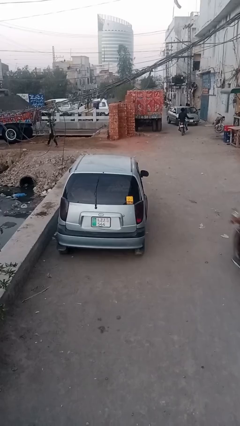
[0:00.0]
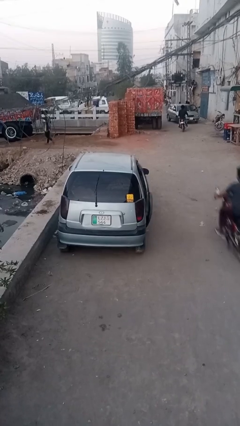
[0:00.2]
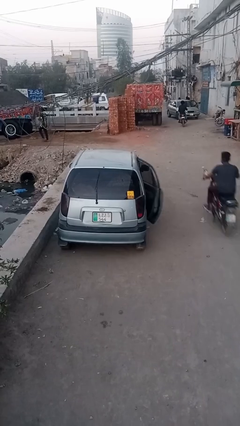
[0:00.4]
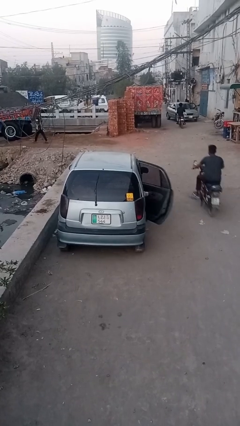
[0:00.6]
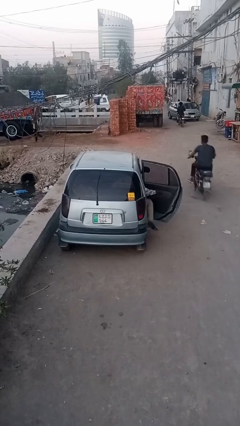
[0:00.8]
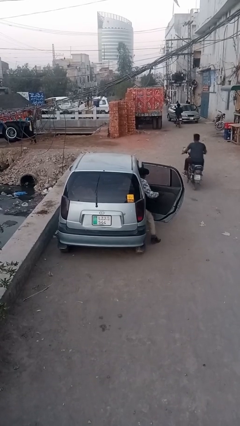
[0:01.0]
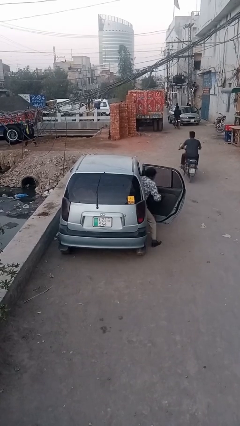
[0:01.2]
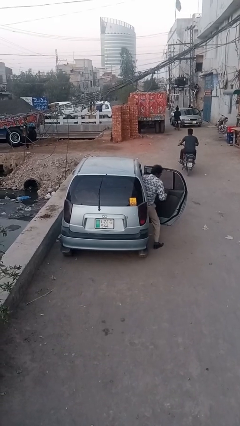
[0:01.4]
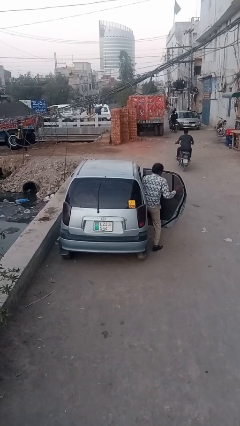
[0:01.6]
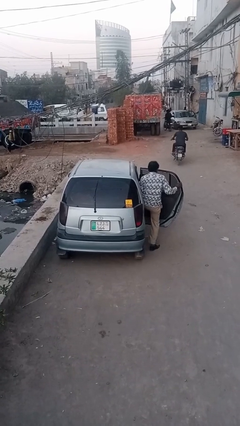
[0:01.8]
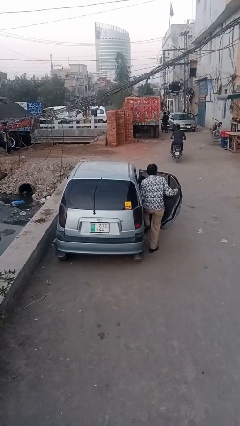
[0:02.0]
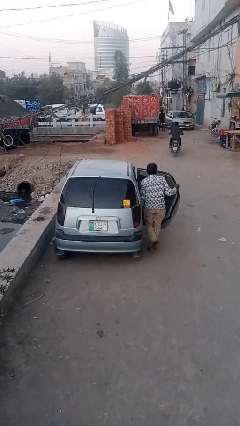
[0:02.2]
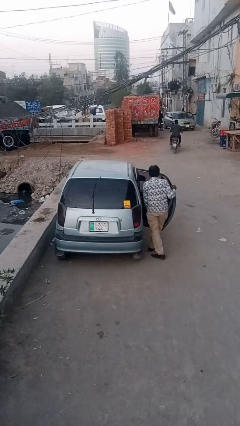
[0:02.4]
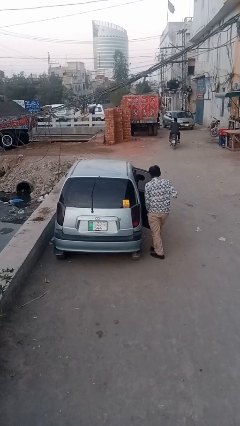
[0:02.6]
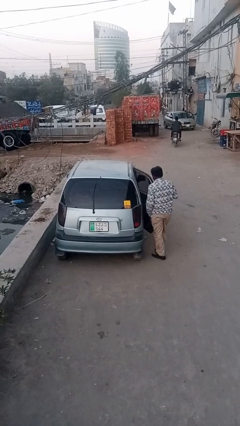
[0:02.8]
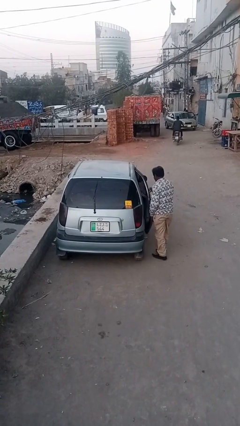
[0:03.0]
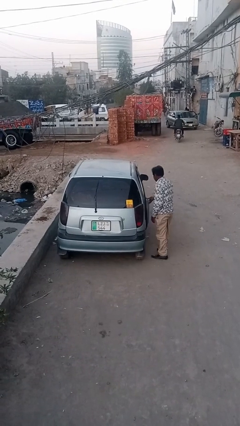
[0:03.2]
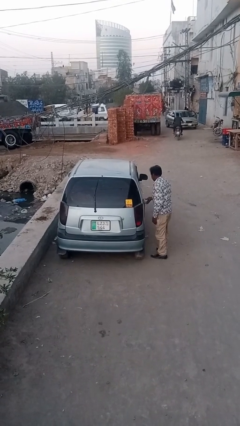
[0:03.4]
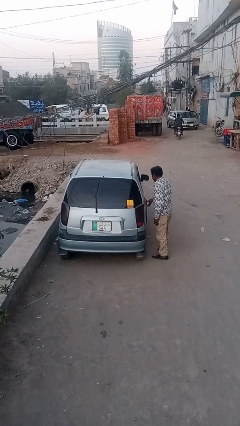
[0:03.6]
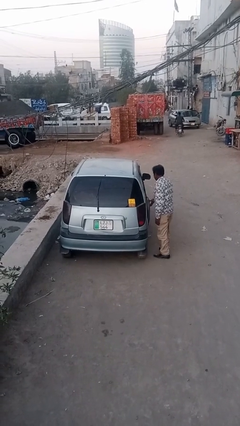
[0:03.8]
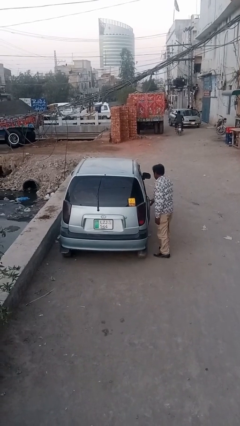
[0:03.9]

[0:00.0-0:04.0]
car drops off person

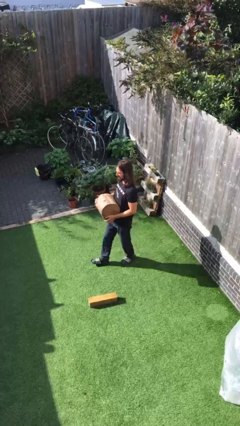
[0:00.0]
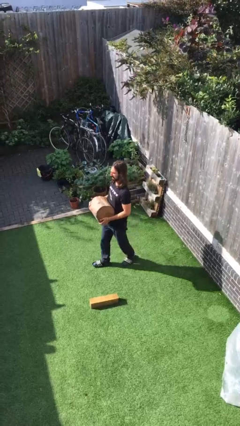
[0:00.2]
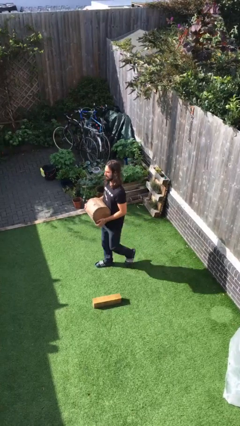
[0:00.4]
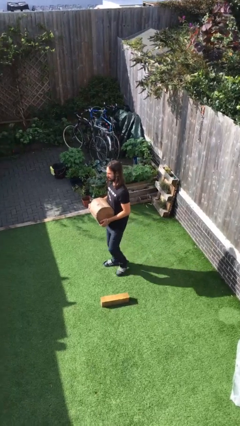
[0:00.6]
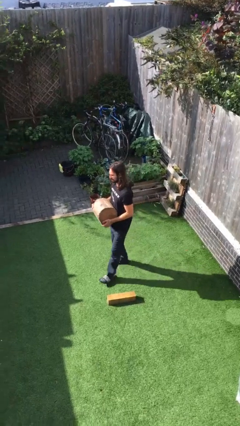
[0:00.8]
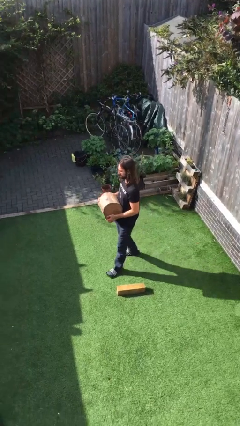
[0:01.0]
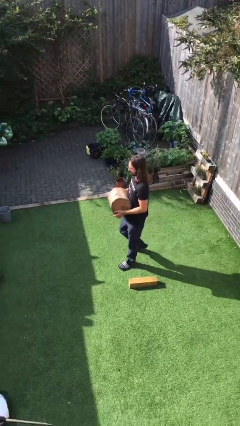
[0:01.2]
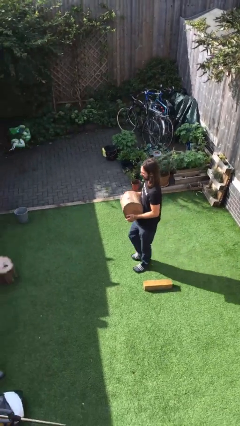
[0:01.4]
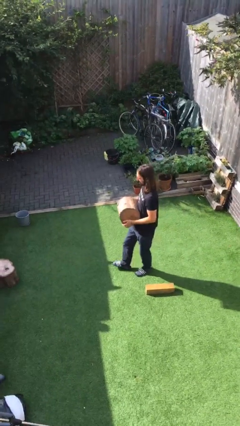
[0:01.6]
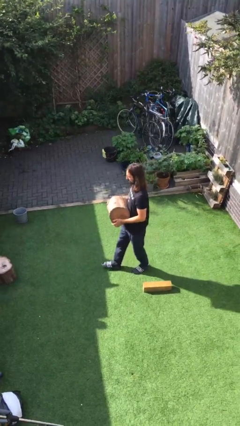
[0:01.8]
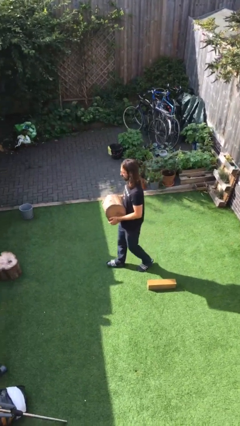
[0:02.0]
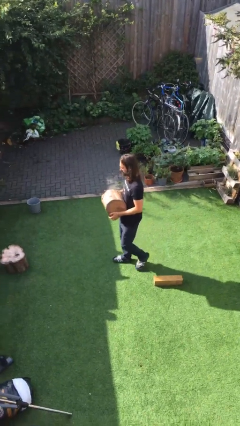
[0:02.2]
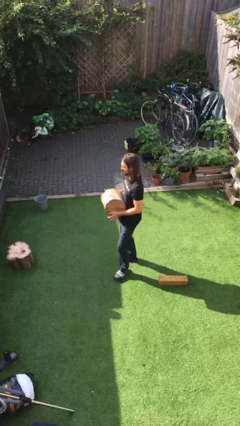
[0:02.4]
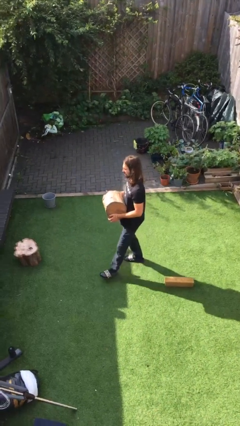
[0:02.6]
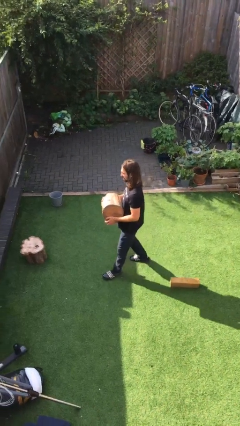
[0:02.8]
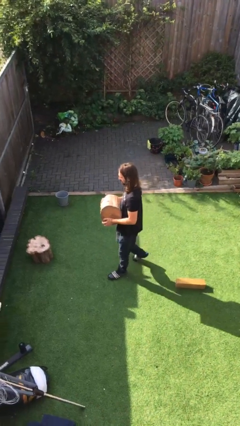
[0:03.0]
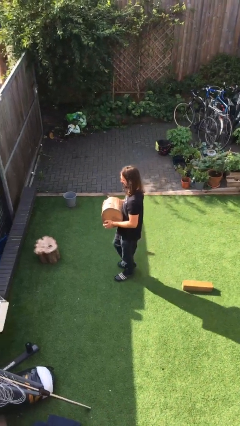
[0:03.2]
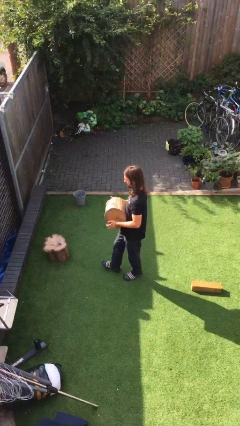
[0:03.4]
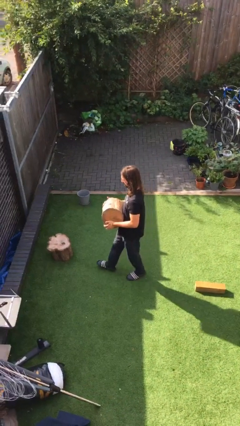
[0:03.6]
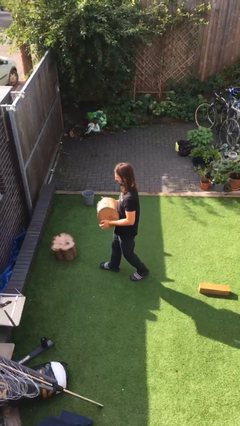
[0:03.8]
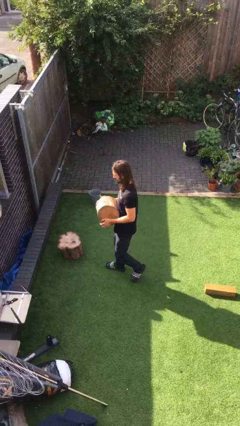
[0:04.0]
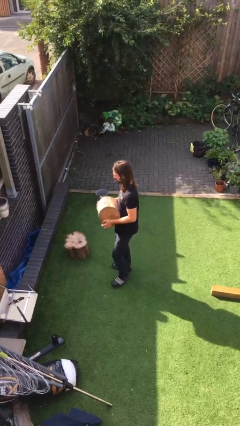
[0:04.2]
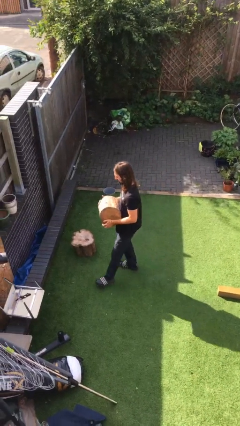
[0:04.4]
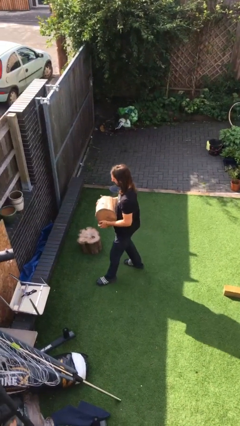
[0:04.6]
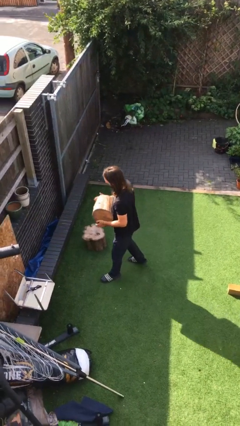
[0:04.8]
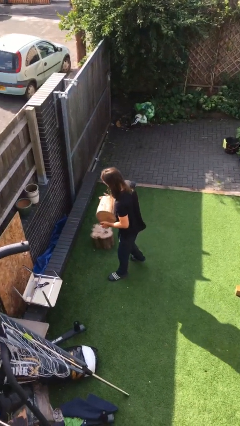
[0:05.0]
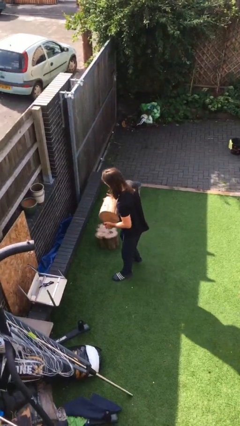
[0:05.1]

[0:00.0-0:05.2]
person carries heavy object

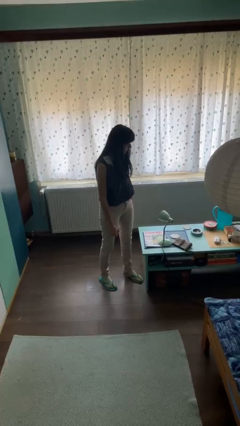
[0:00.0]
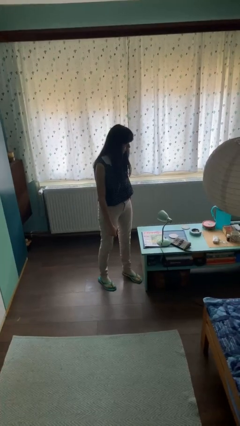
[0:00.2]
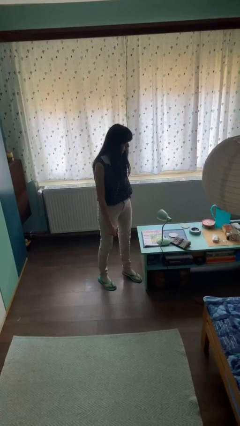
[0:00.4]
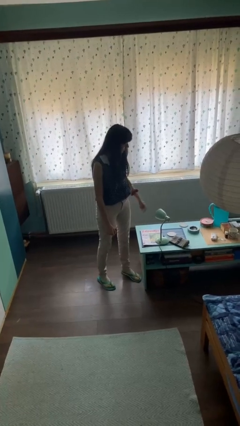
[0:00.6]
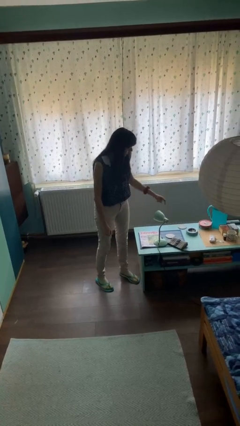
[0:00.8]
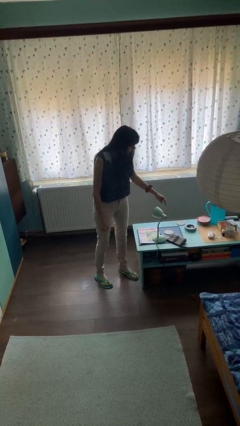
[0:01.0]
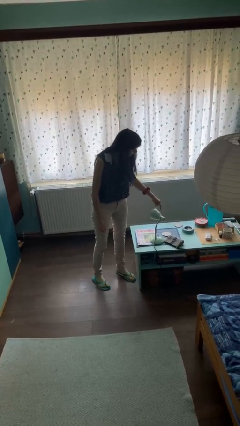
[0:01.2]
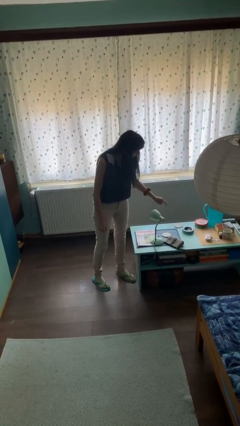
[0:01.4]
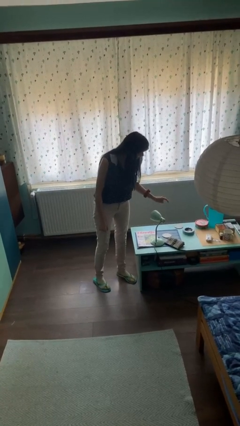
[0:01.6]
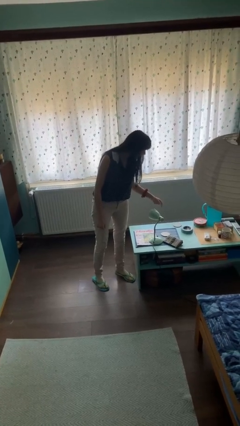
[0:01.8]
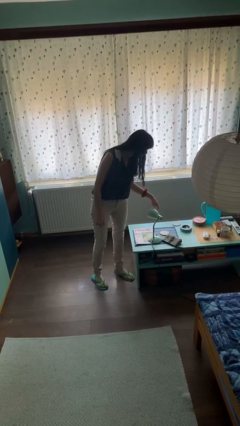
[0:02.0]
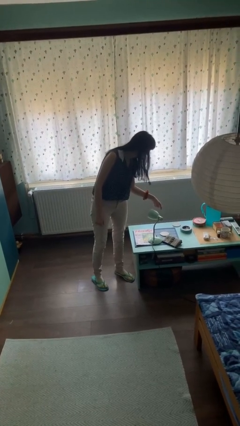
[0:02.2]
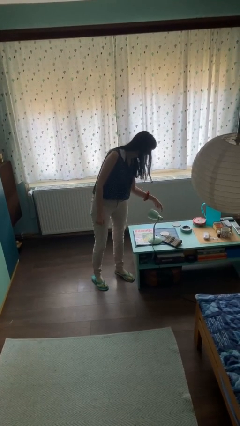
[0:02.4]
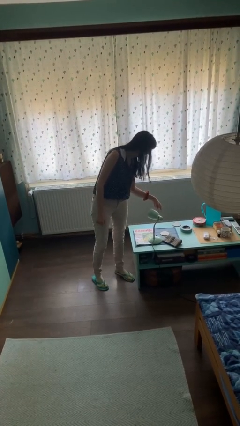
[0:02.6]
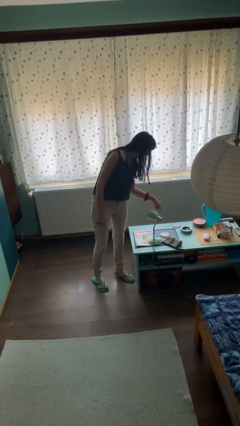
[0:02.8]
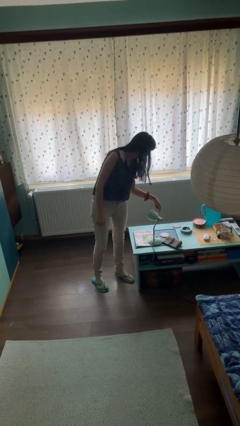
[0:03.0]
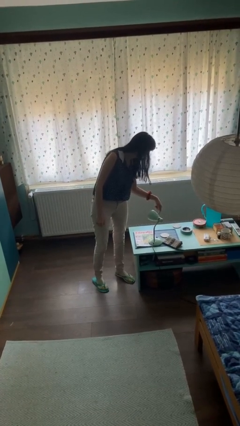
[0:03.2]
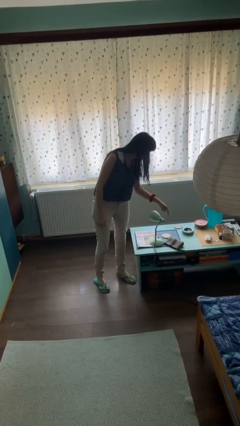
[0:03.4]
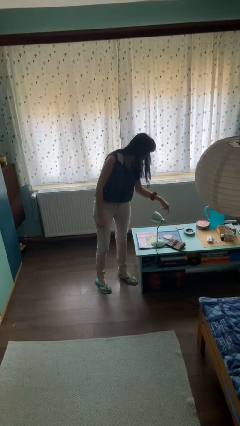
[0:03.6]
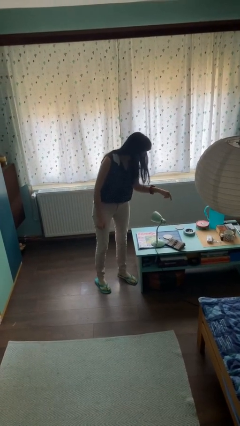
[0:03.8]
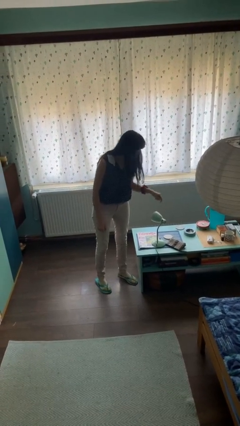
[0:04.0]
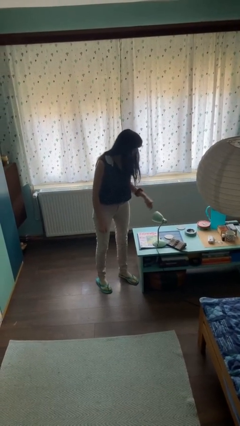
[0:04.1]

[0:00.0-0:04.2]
person taps object with finger

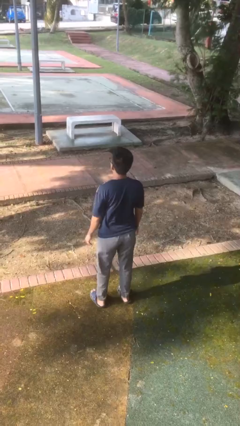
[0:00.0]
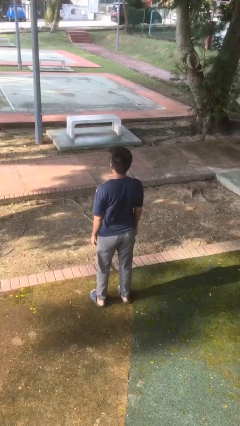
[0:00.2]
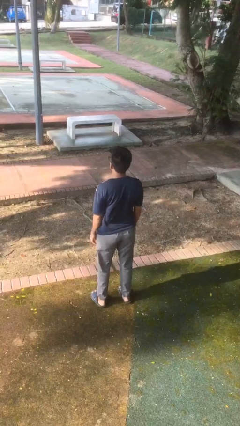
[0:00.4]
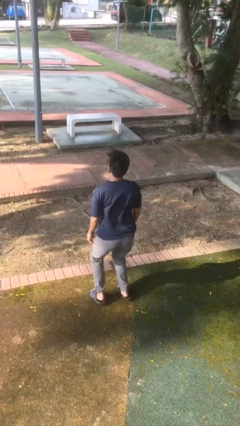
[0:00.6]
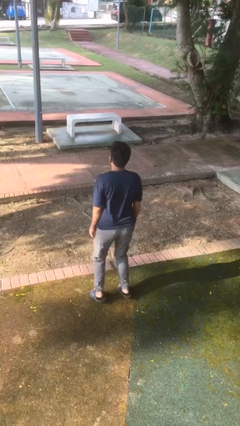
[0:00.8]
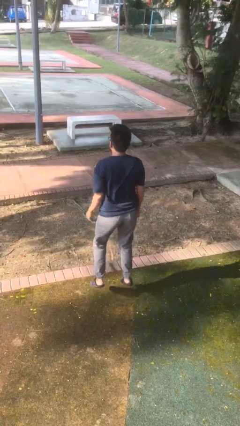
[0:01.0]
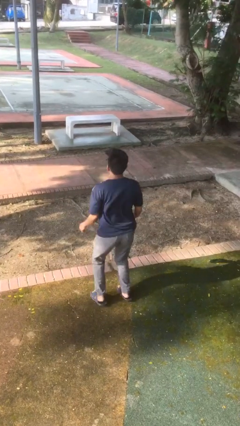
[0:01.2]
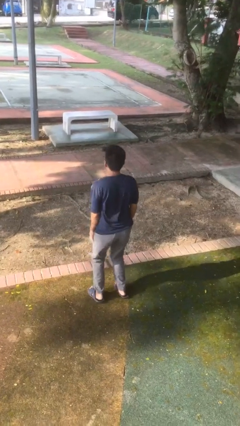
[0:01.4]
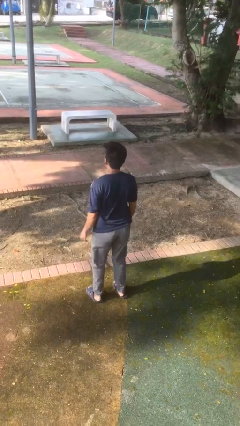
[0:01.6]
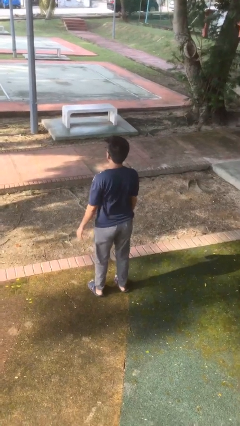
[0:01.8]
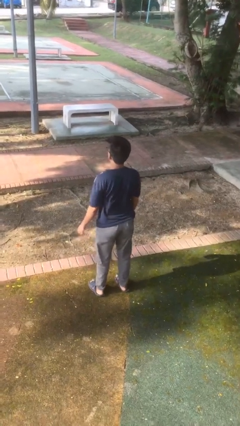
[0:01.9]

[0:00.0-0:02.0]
person jumps

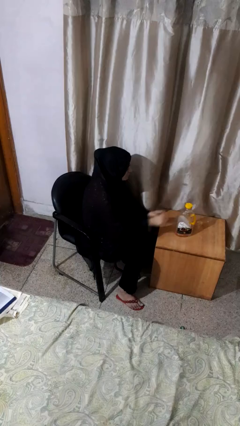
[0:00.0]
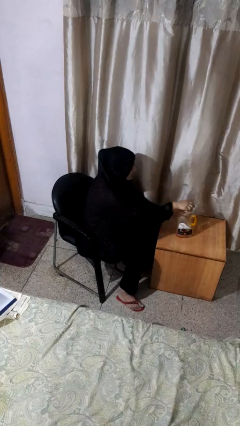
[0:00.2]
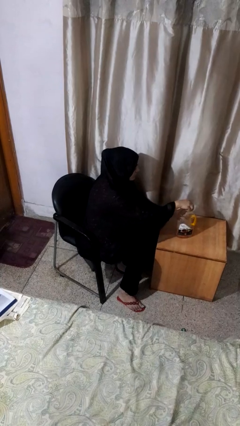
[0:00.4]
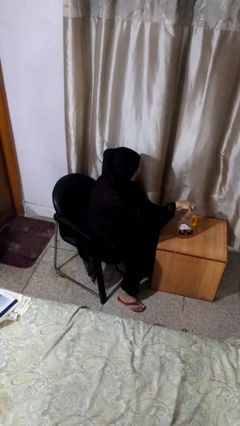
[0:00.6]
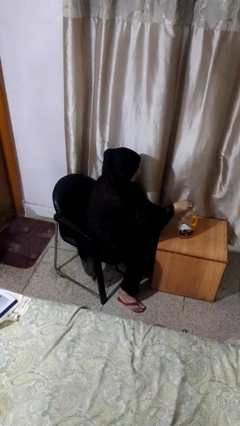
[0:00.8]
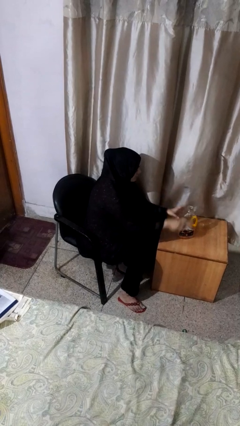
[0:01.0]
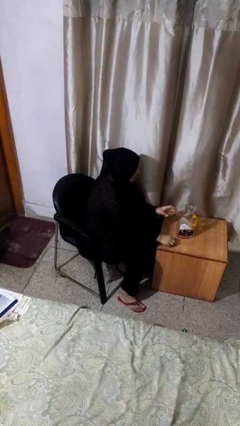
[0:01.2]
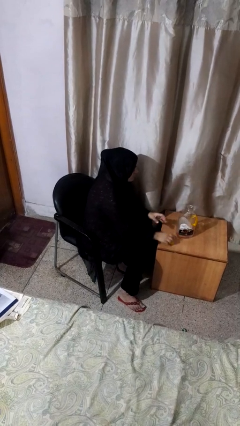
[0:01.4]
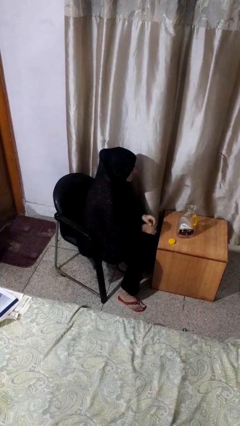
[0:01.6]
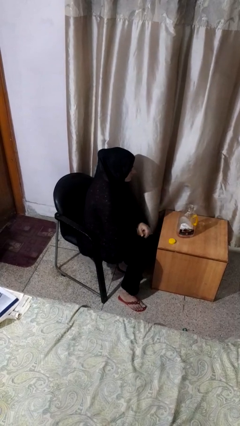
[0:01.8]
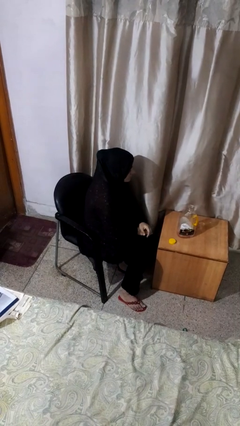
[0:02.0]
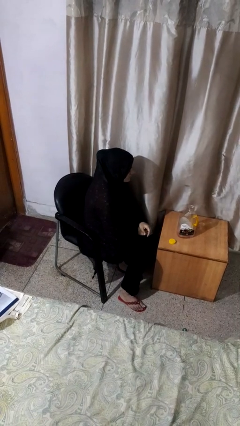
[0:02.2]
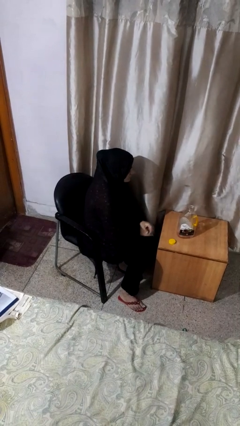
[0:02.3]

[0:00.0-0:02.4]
person unscrews lid from bottle

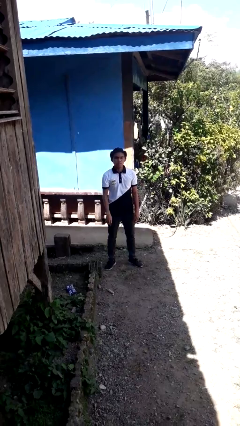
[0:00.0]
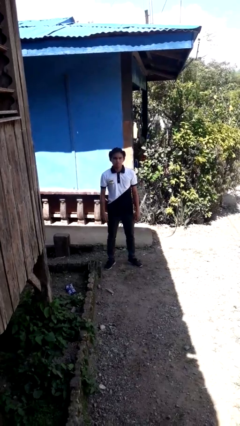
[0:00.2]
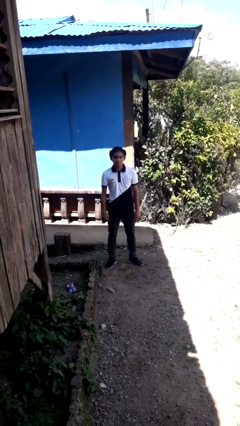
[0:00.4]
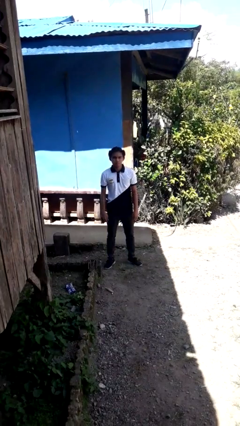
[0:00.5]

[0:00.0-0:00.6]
person gestures swipe down
